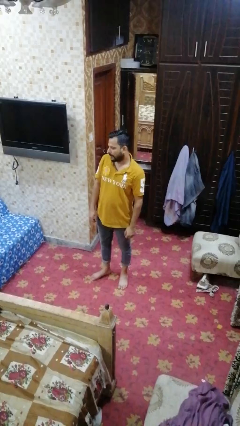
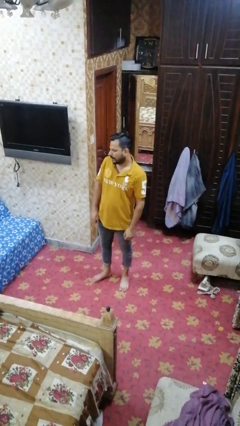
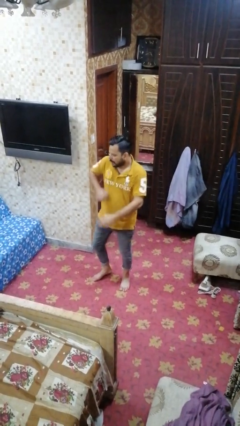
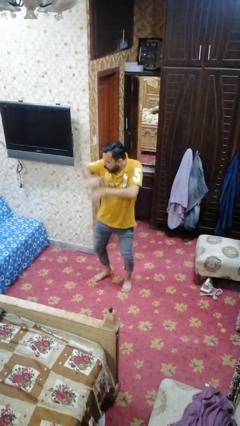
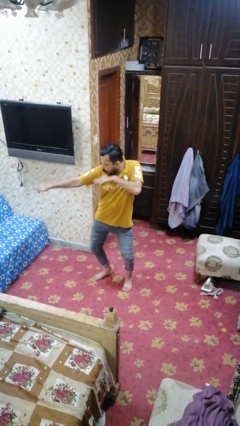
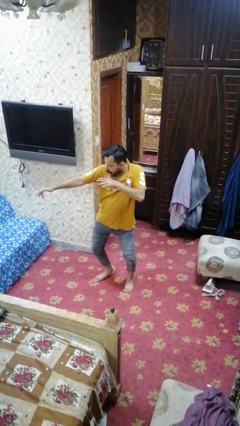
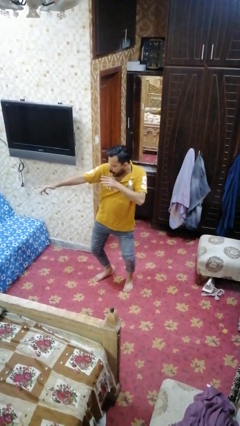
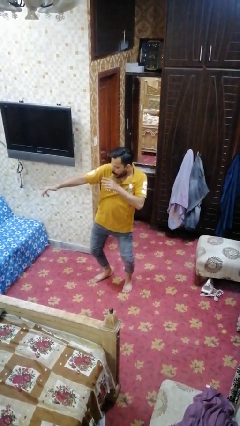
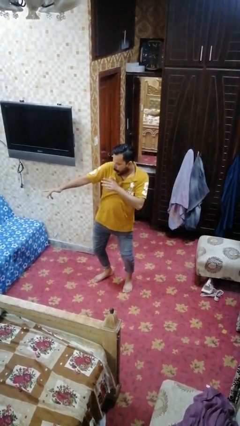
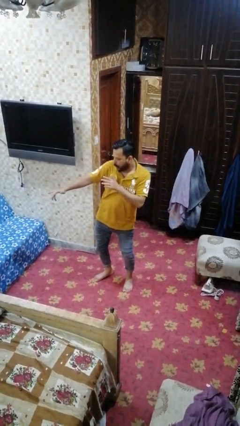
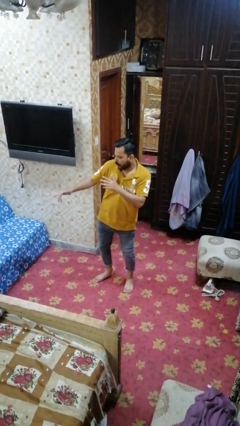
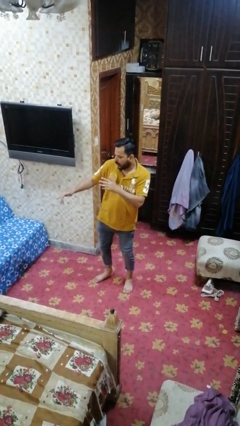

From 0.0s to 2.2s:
person karate chop

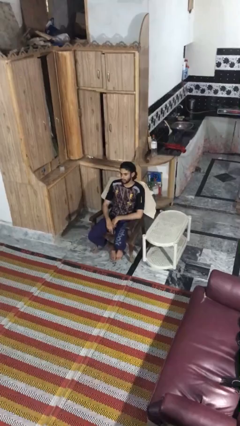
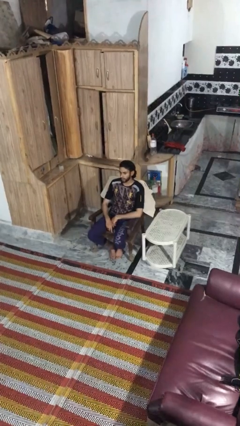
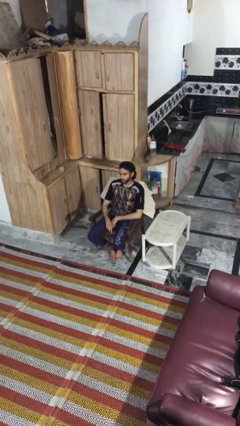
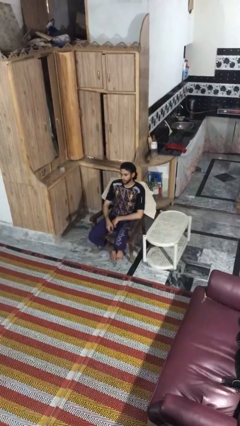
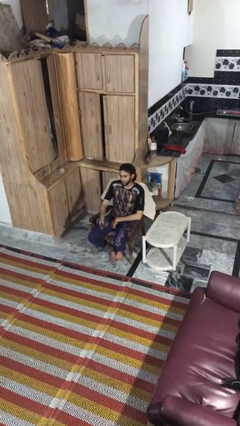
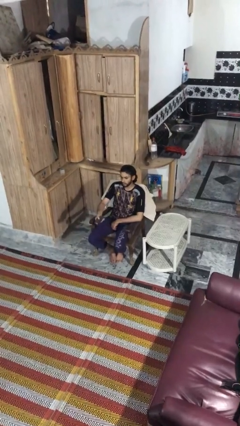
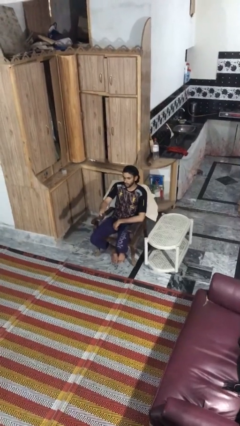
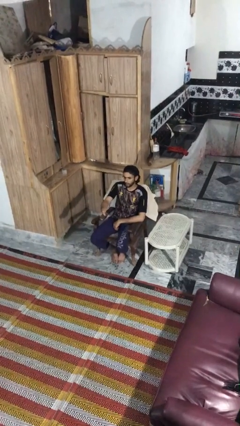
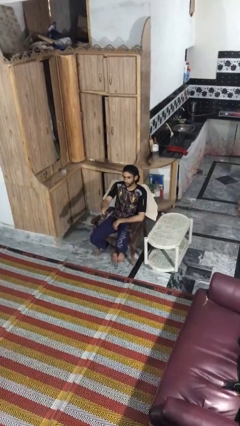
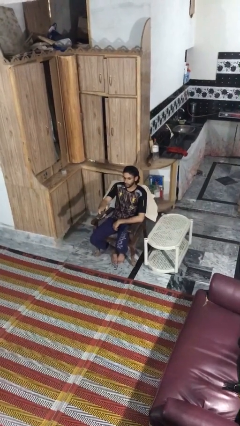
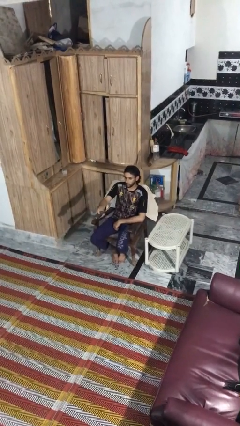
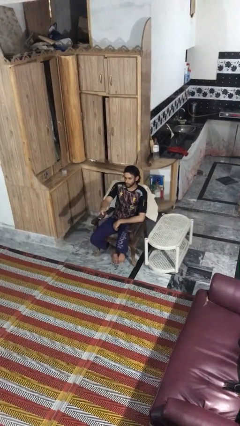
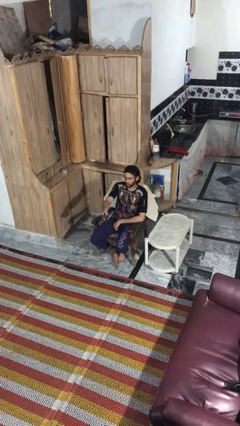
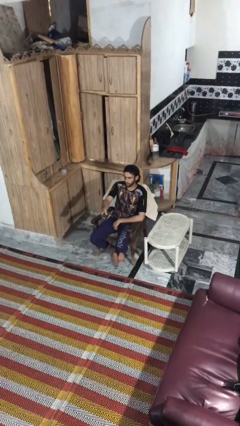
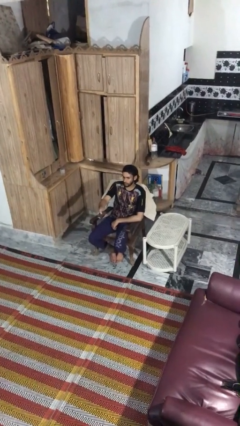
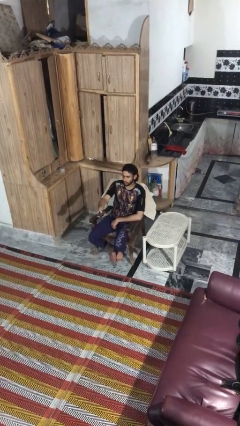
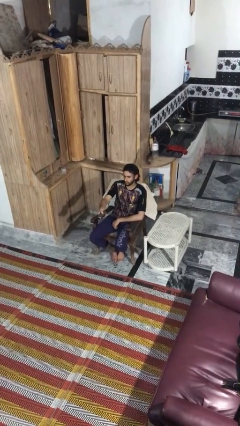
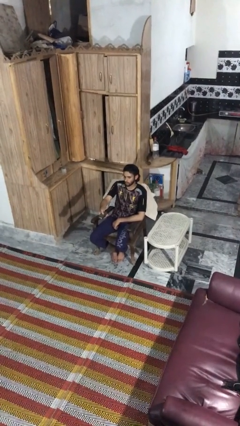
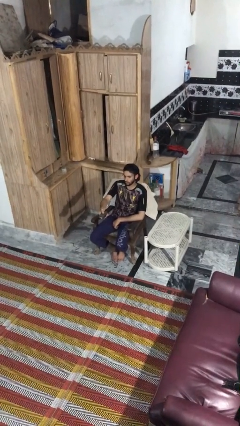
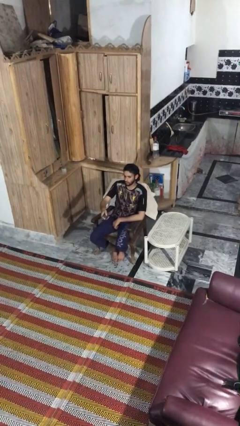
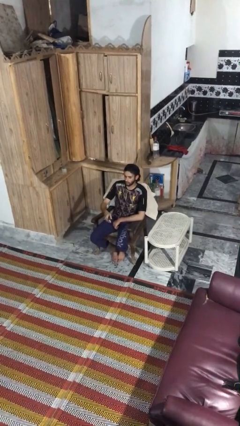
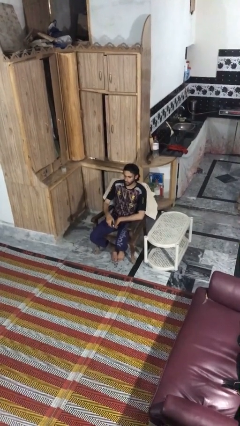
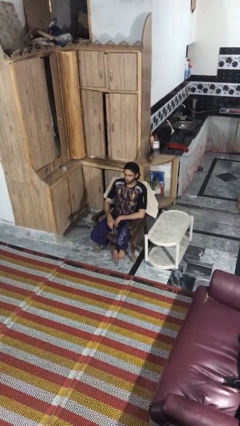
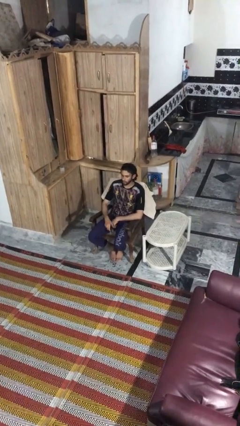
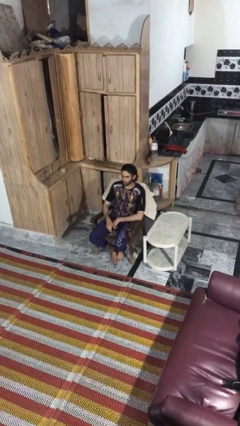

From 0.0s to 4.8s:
person uses television remote

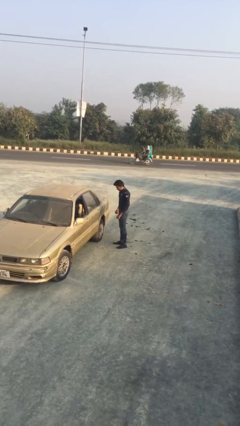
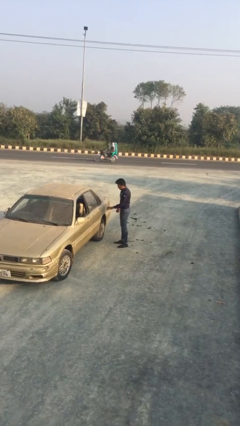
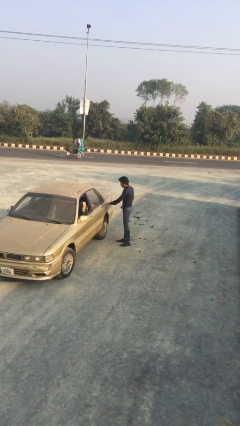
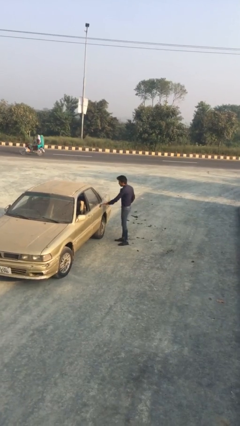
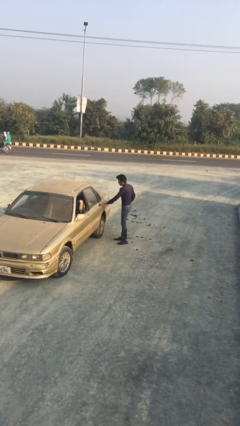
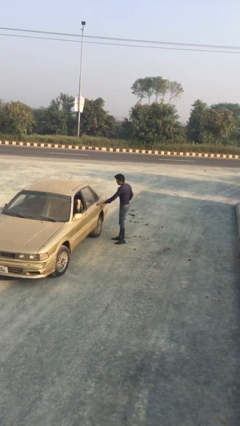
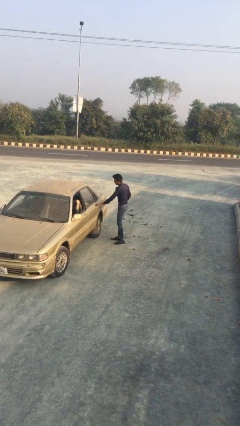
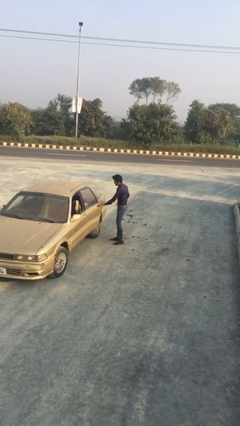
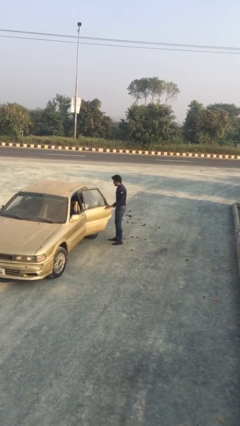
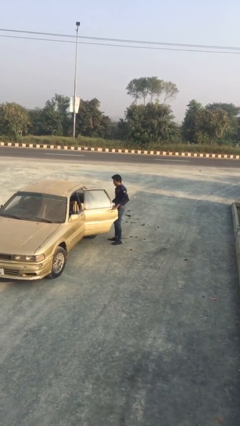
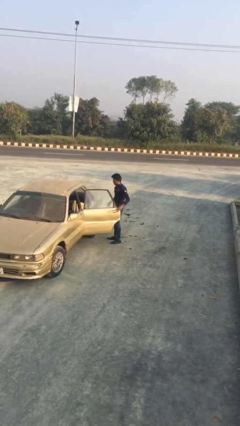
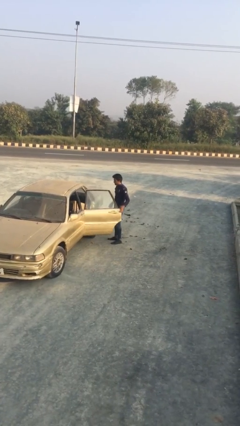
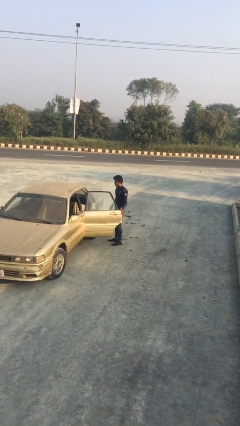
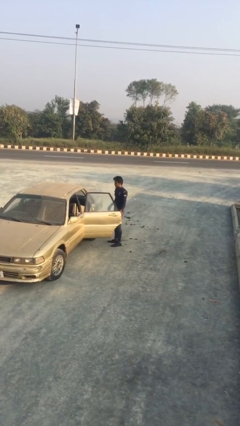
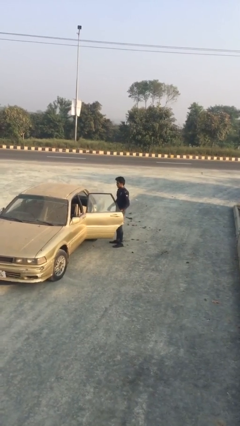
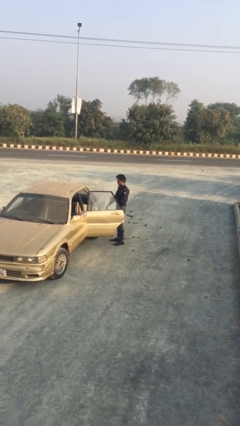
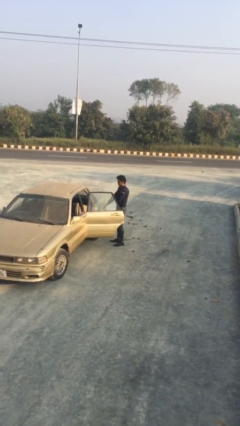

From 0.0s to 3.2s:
person opens car door

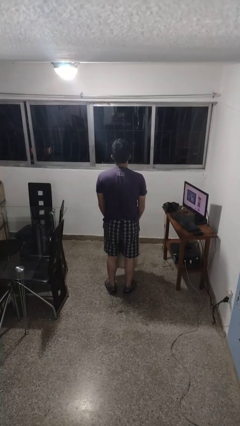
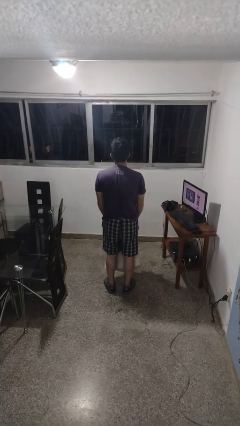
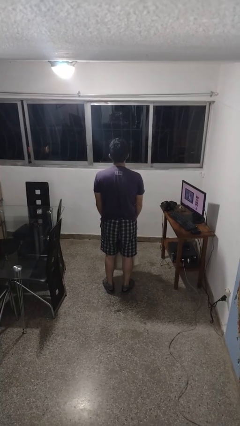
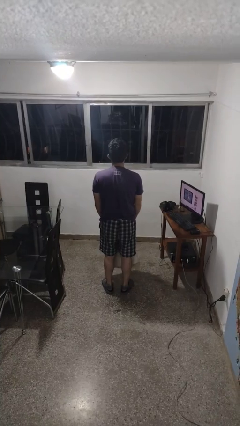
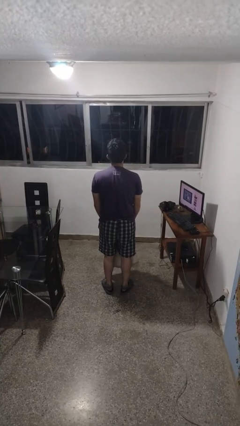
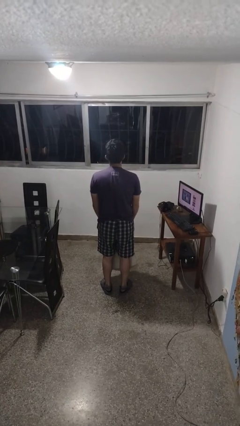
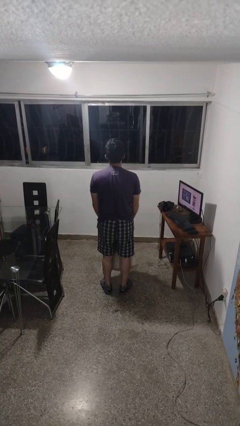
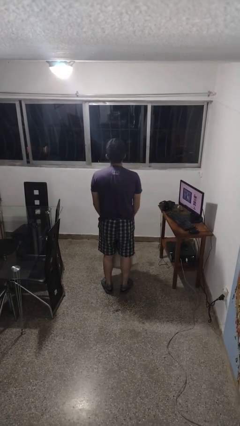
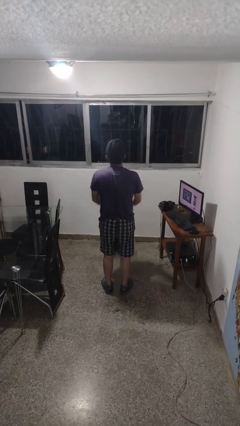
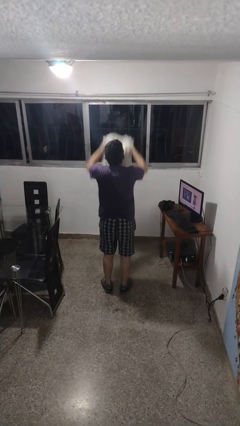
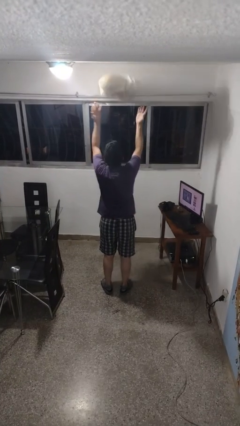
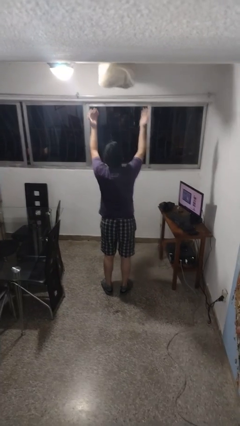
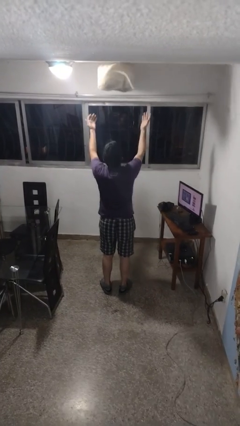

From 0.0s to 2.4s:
person drops object

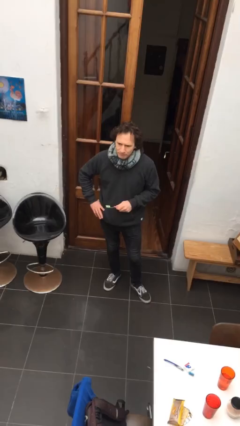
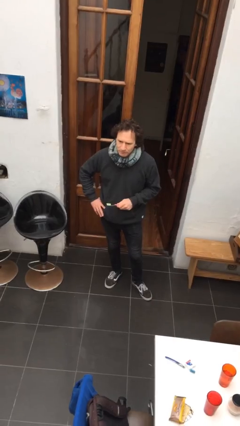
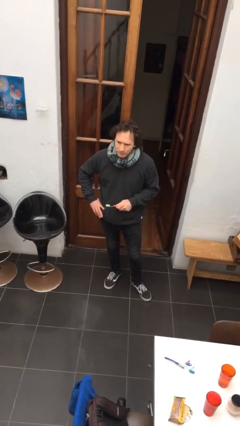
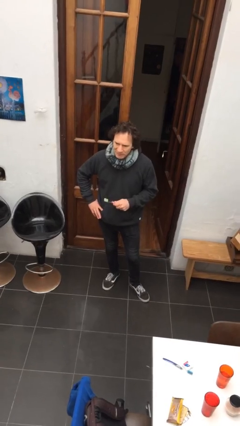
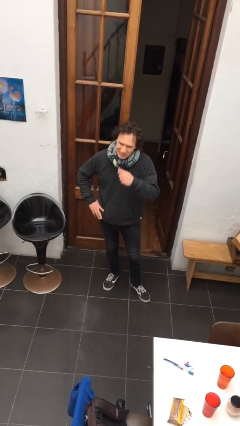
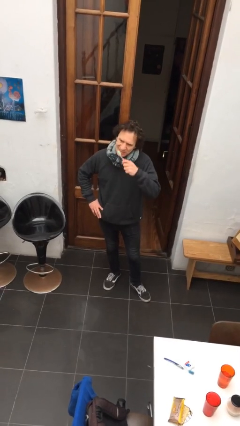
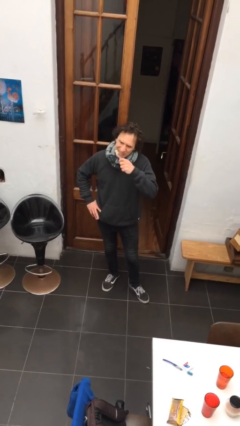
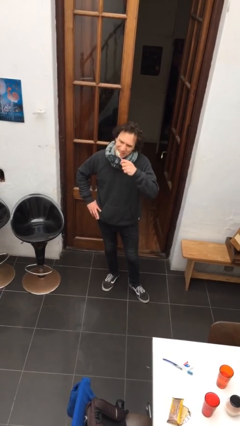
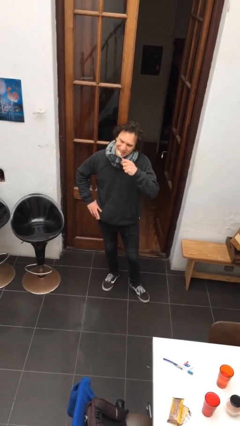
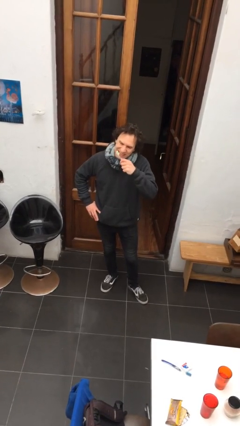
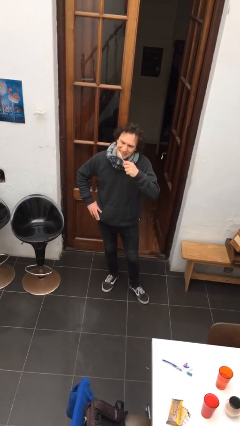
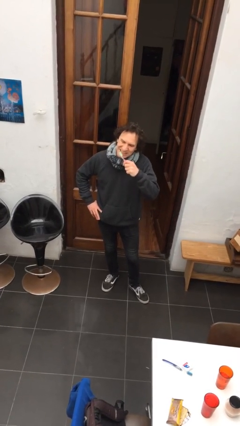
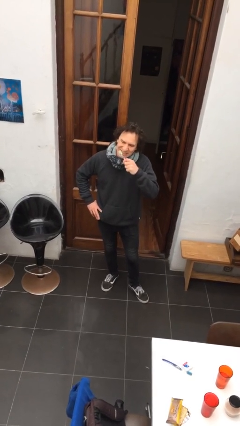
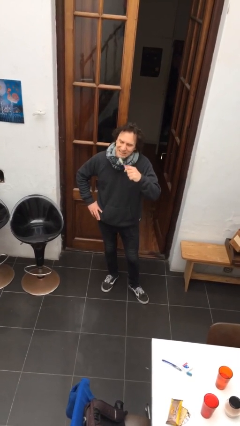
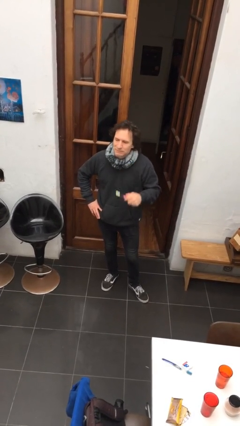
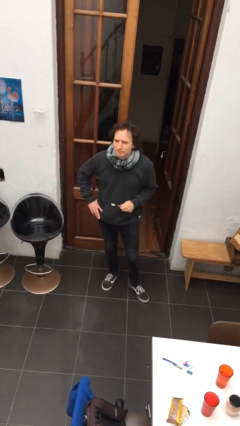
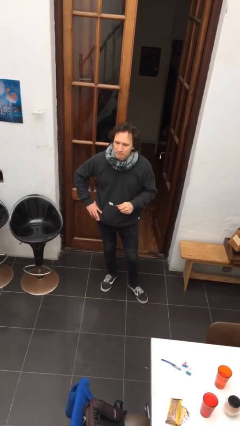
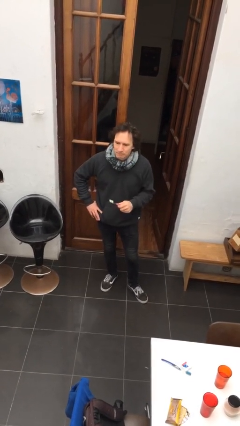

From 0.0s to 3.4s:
person brushes teeth

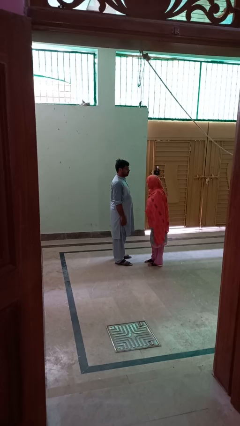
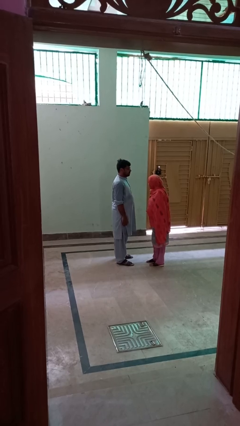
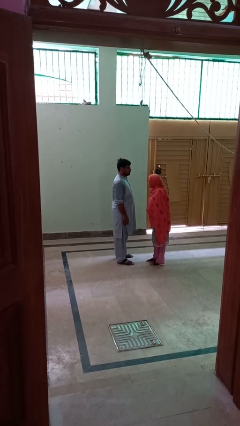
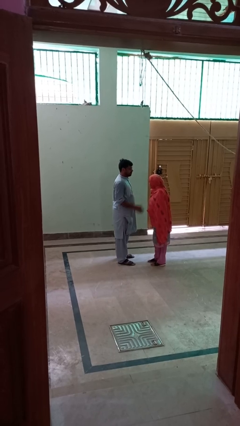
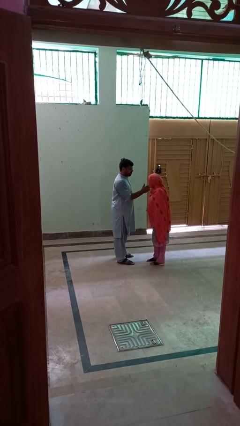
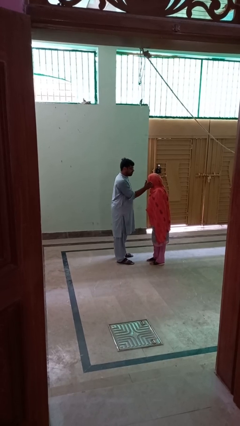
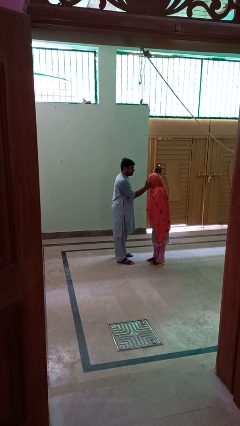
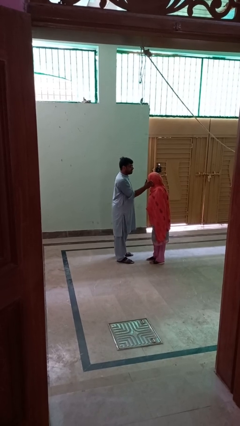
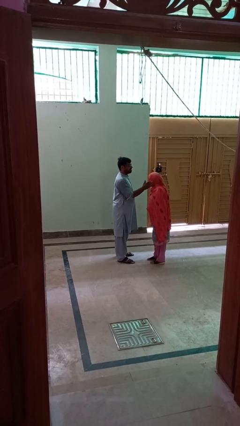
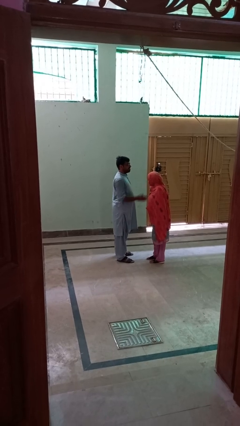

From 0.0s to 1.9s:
person touches face of person
